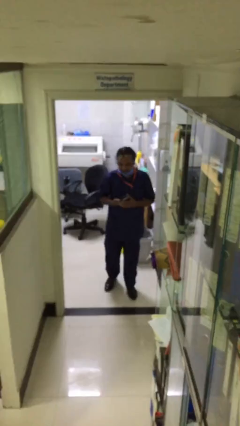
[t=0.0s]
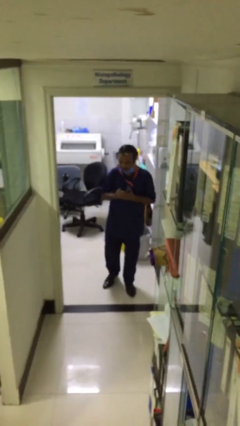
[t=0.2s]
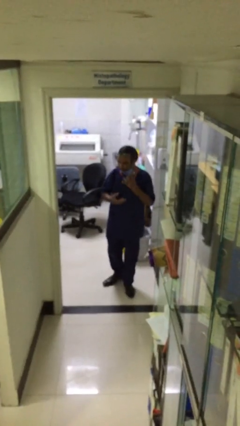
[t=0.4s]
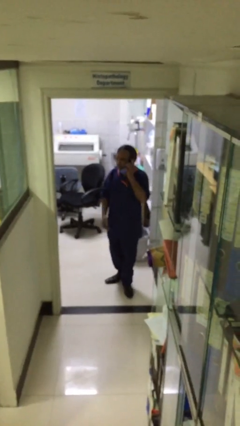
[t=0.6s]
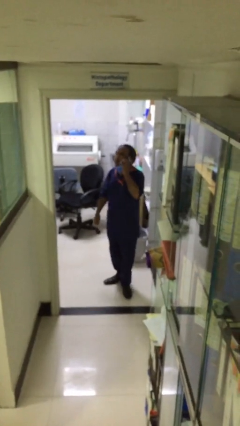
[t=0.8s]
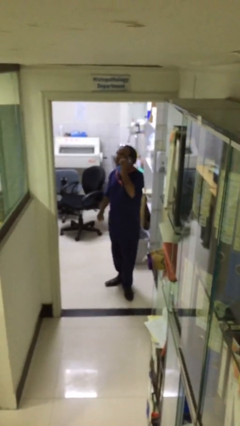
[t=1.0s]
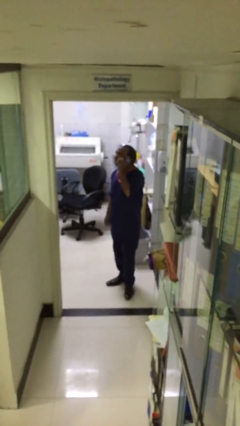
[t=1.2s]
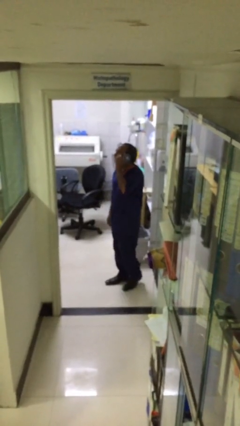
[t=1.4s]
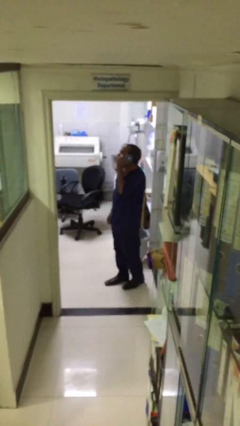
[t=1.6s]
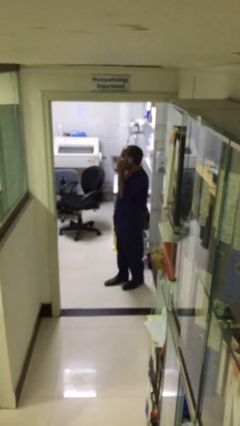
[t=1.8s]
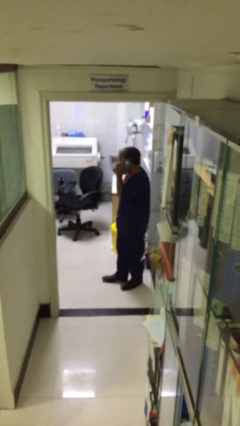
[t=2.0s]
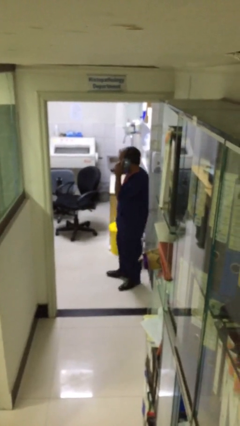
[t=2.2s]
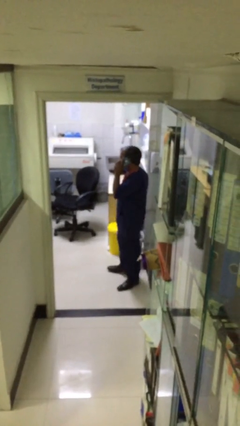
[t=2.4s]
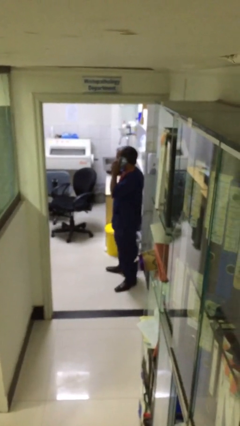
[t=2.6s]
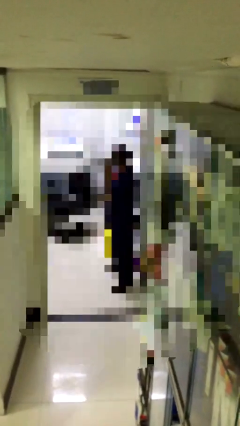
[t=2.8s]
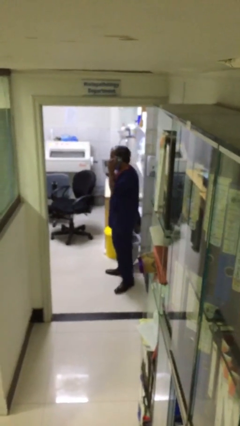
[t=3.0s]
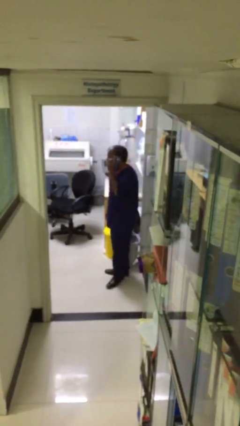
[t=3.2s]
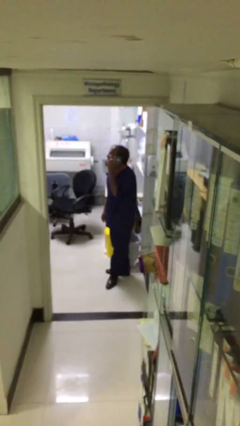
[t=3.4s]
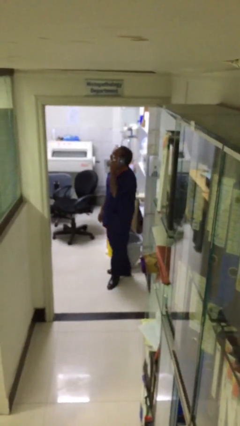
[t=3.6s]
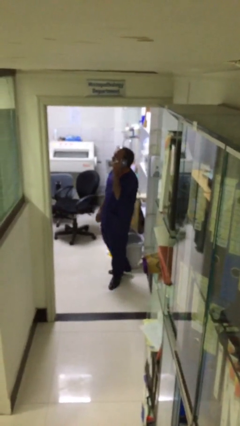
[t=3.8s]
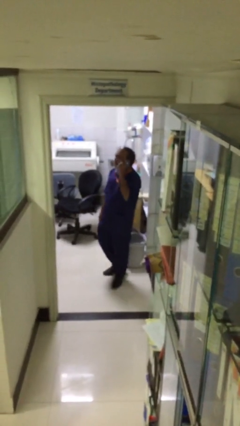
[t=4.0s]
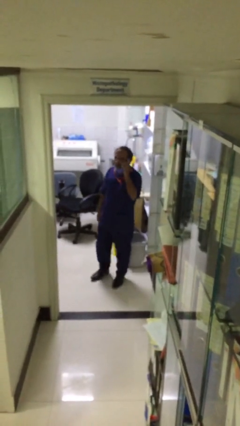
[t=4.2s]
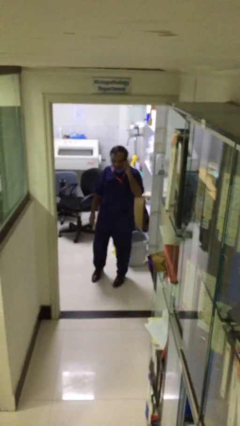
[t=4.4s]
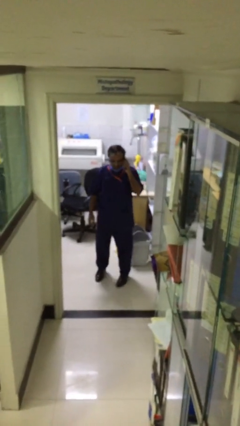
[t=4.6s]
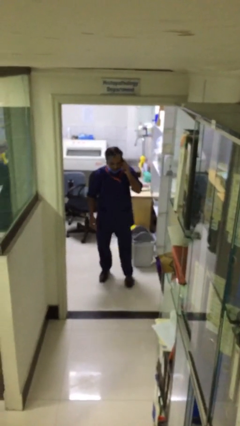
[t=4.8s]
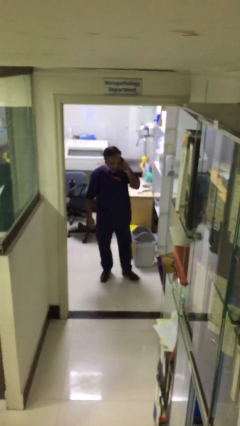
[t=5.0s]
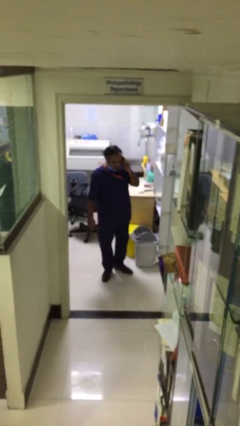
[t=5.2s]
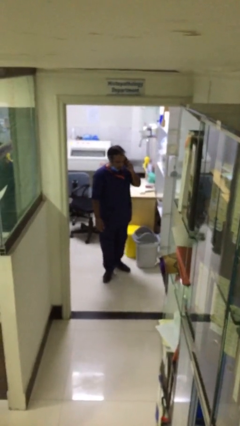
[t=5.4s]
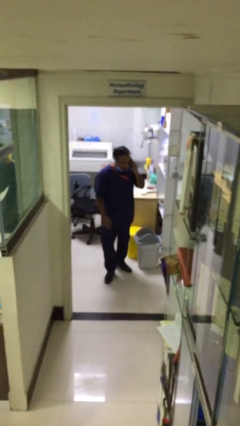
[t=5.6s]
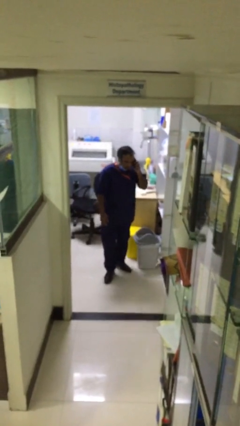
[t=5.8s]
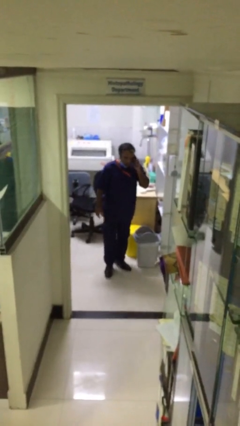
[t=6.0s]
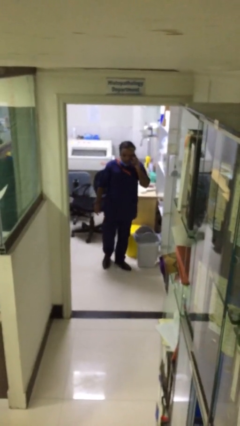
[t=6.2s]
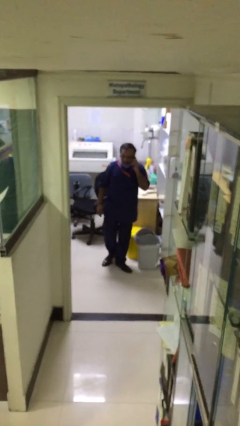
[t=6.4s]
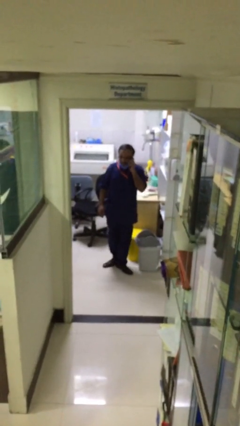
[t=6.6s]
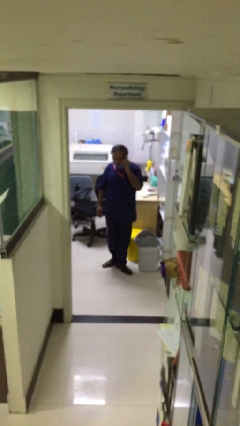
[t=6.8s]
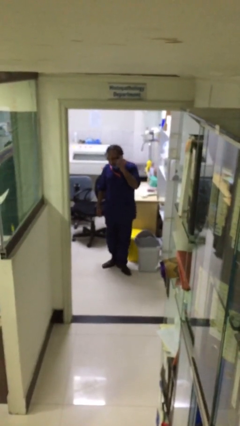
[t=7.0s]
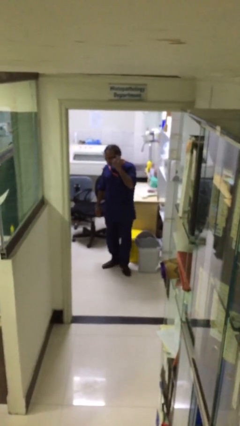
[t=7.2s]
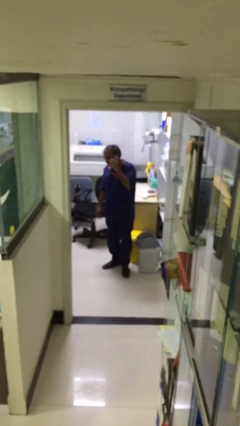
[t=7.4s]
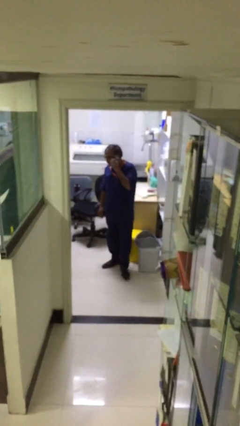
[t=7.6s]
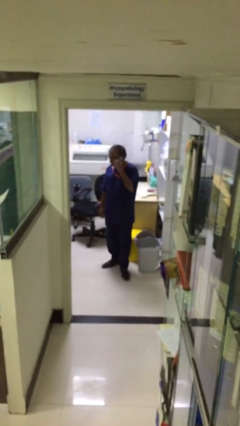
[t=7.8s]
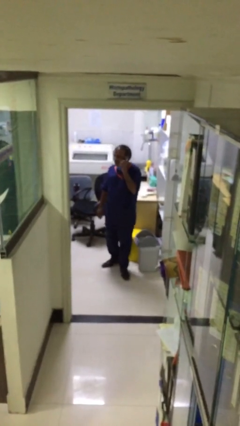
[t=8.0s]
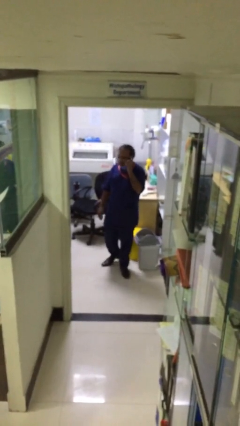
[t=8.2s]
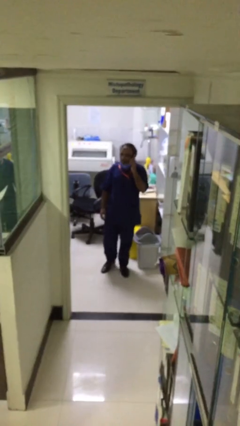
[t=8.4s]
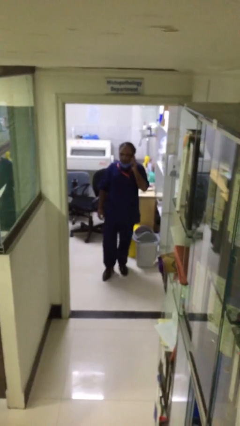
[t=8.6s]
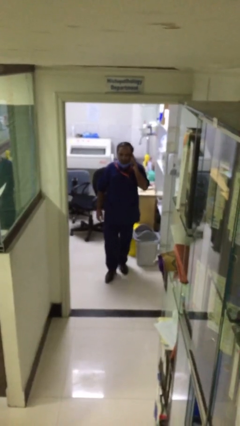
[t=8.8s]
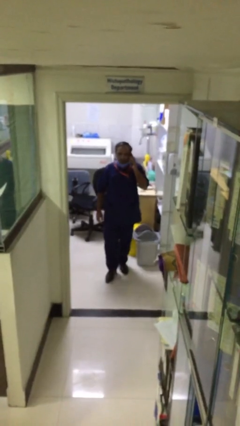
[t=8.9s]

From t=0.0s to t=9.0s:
person talks on phone

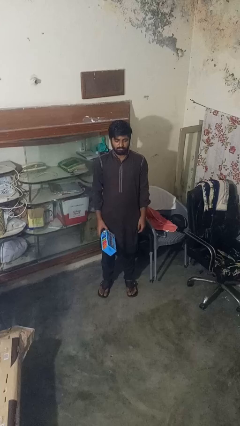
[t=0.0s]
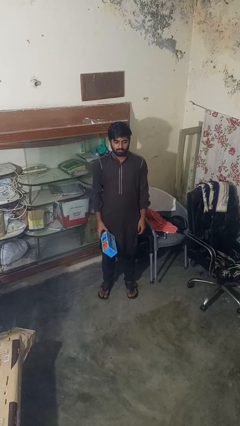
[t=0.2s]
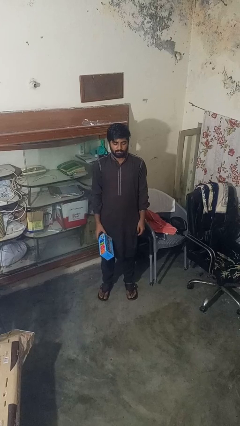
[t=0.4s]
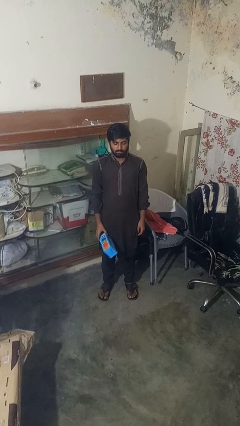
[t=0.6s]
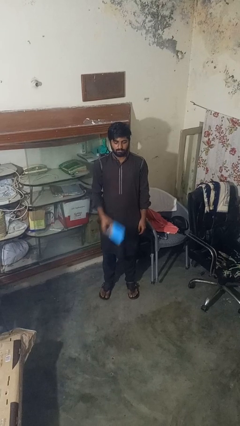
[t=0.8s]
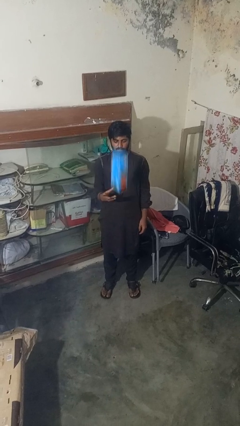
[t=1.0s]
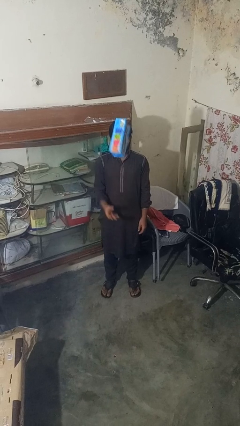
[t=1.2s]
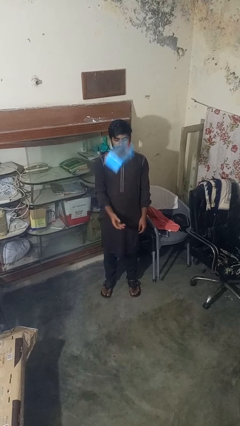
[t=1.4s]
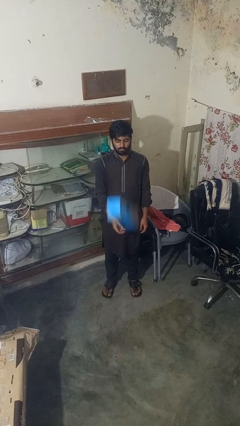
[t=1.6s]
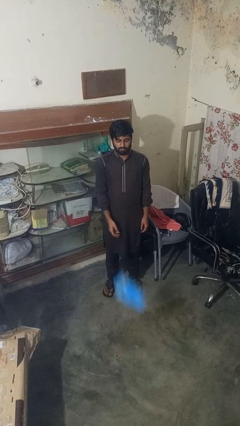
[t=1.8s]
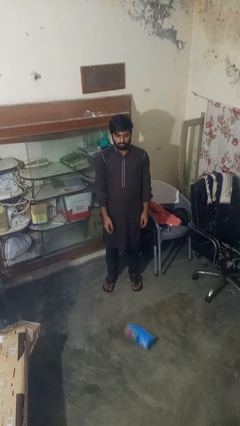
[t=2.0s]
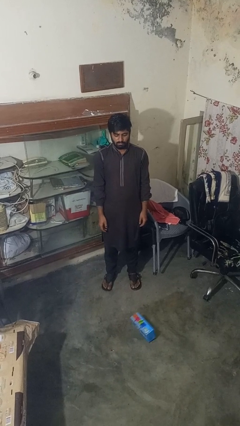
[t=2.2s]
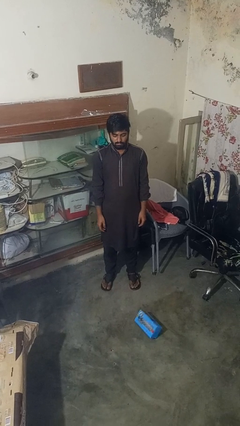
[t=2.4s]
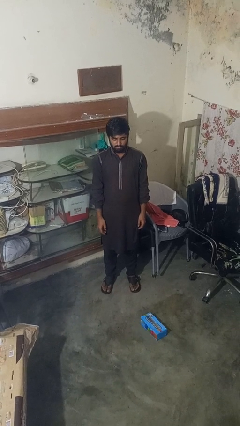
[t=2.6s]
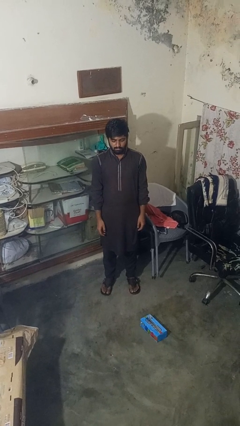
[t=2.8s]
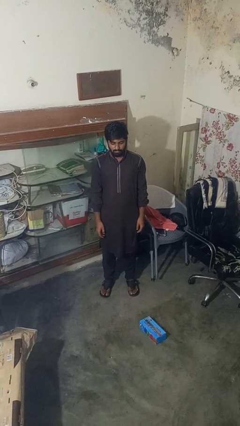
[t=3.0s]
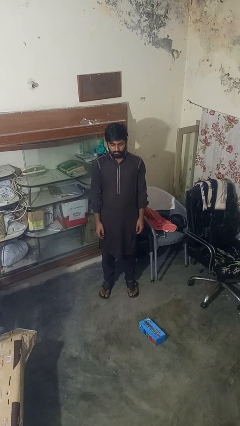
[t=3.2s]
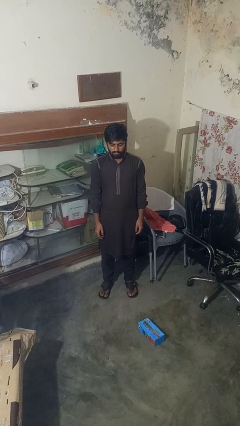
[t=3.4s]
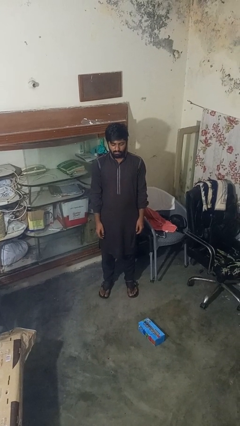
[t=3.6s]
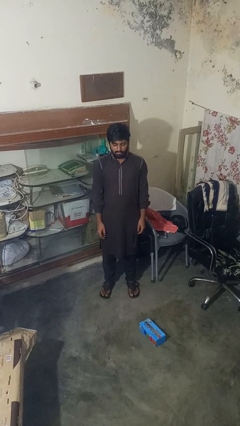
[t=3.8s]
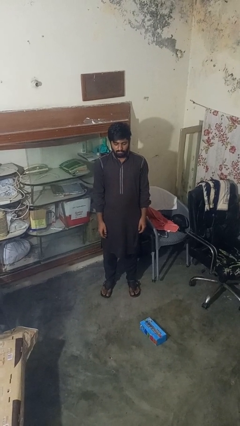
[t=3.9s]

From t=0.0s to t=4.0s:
person throws object into air

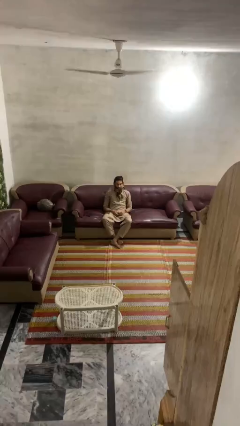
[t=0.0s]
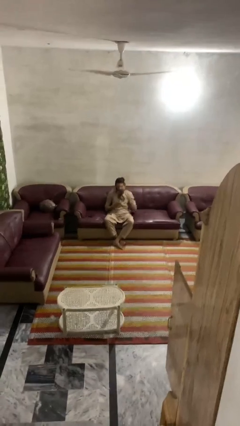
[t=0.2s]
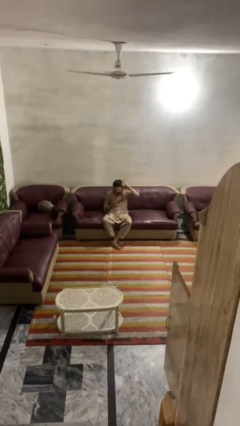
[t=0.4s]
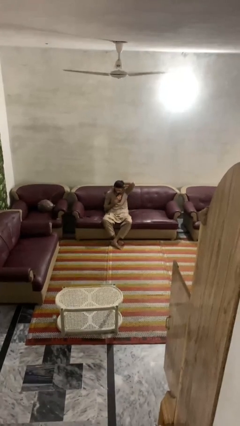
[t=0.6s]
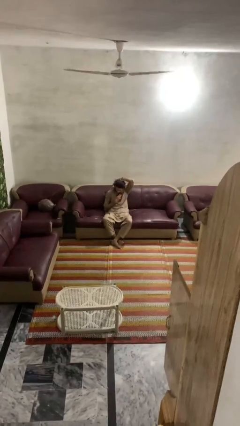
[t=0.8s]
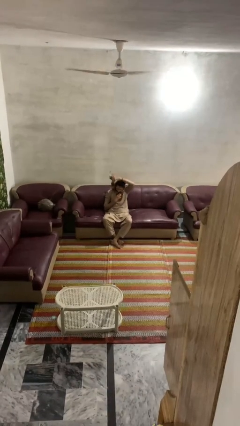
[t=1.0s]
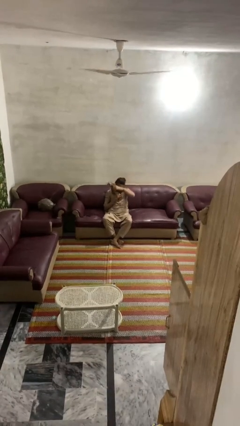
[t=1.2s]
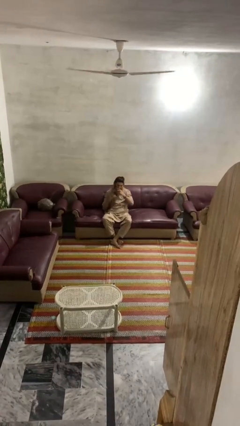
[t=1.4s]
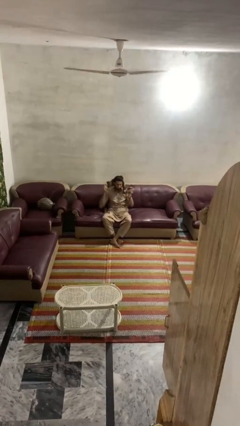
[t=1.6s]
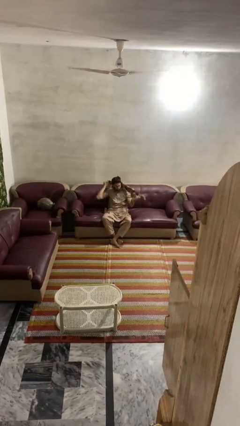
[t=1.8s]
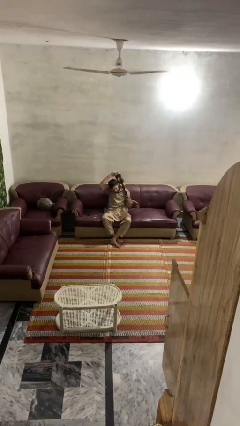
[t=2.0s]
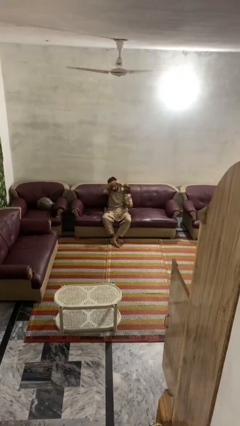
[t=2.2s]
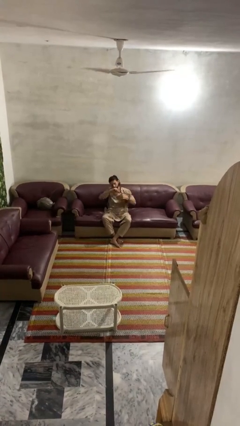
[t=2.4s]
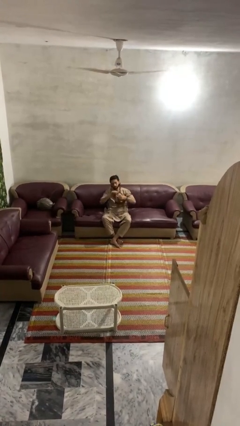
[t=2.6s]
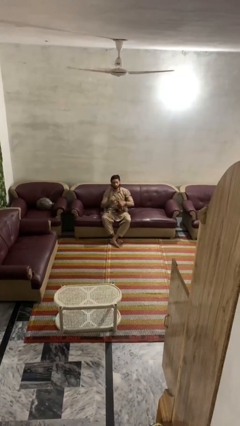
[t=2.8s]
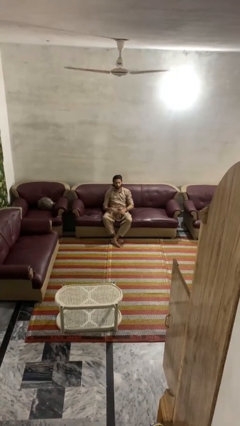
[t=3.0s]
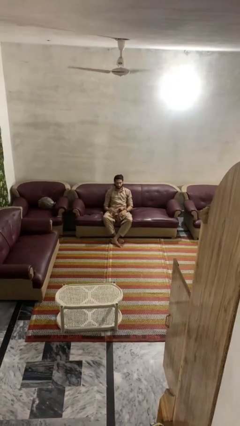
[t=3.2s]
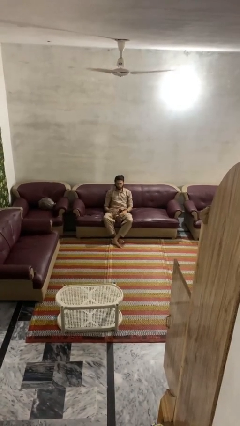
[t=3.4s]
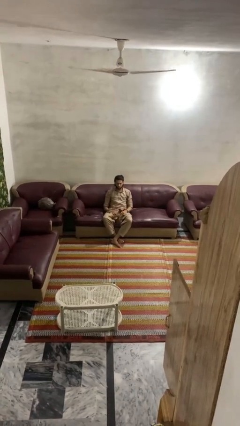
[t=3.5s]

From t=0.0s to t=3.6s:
person takes off scarf

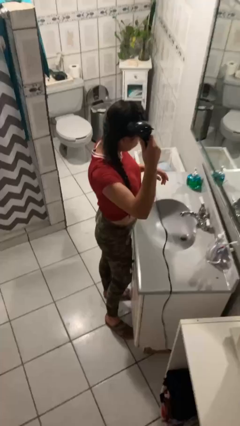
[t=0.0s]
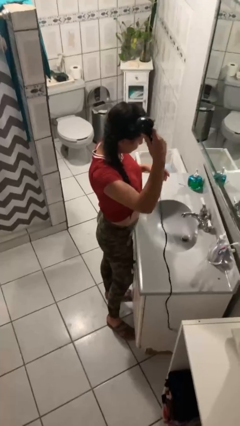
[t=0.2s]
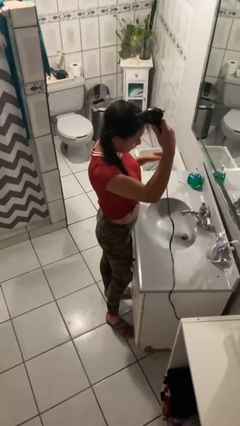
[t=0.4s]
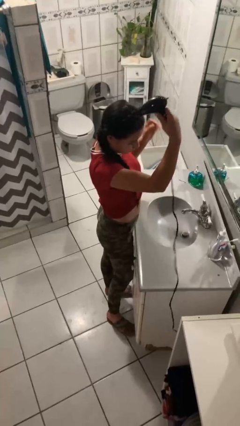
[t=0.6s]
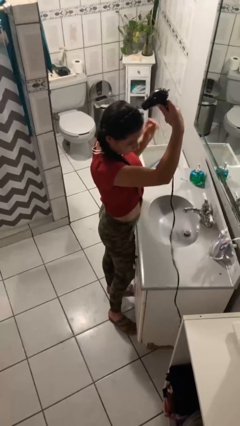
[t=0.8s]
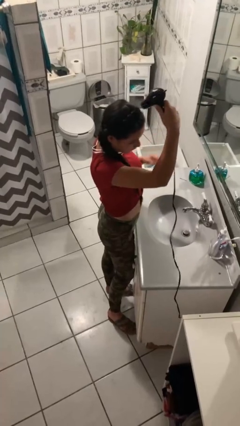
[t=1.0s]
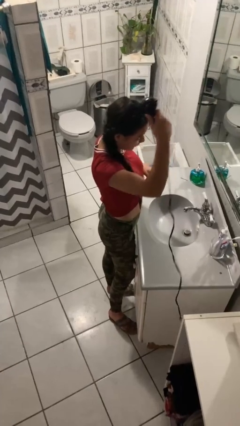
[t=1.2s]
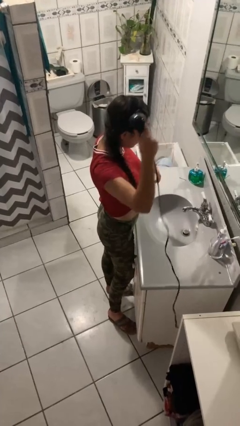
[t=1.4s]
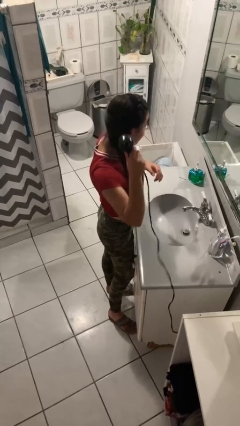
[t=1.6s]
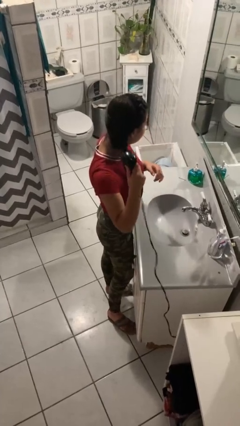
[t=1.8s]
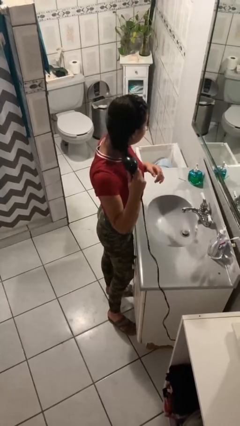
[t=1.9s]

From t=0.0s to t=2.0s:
person dries hair with hairdryer
